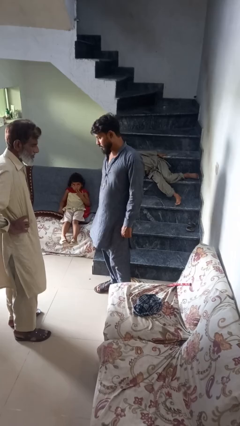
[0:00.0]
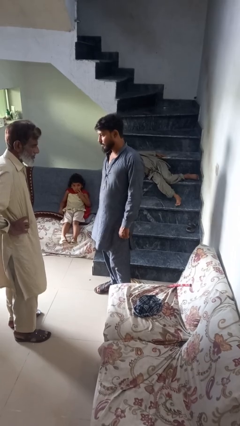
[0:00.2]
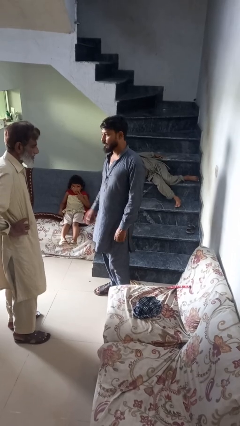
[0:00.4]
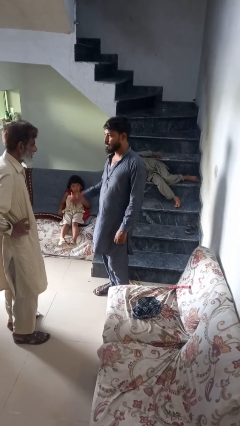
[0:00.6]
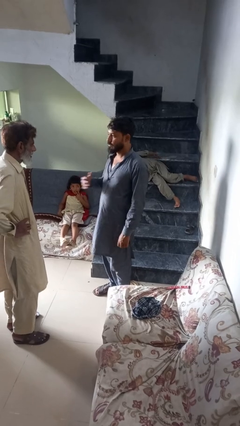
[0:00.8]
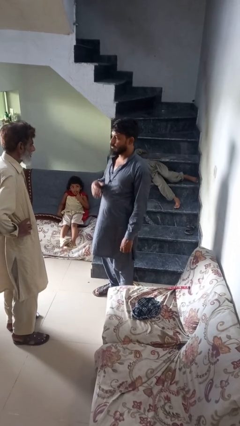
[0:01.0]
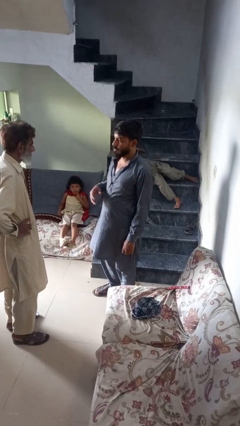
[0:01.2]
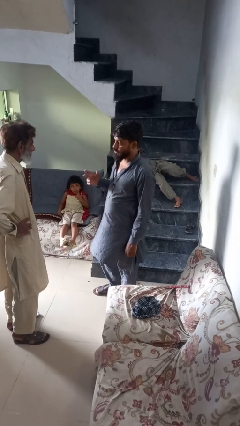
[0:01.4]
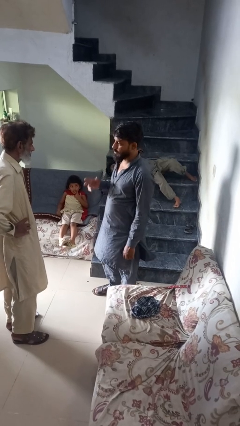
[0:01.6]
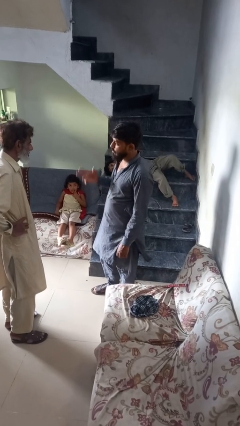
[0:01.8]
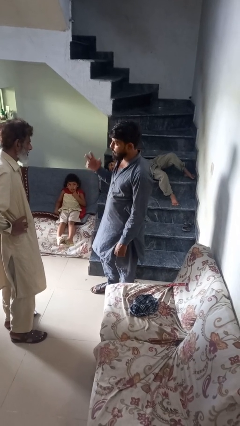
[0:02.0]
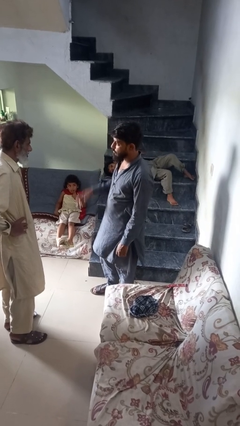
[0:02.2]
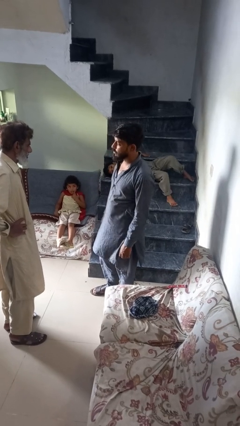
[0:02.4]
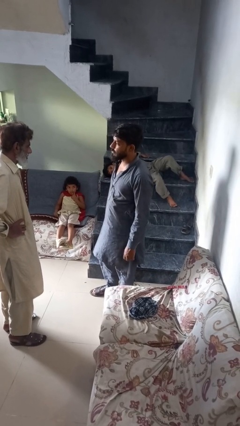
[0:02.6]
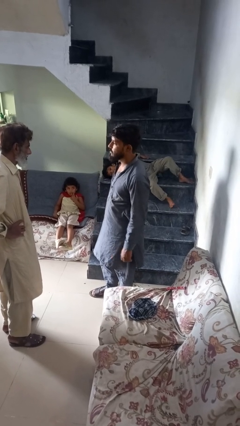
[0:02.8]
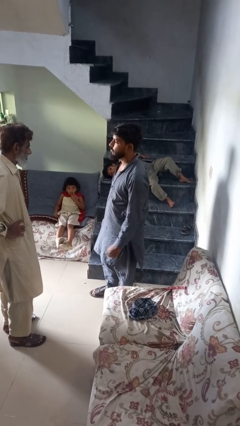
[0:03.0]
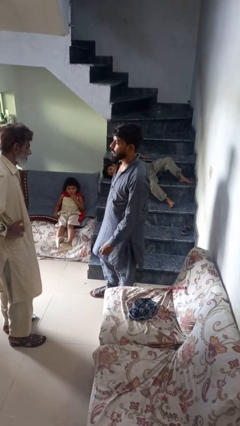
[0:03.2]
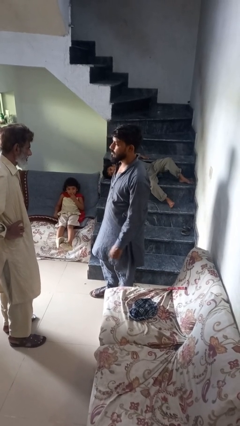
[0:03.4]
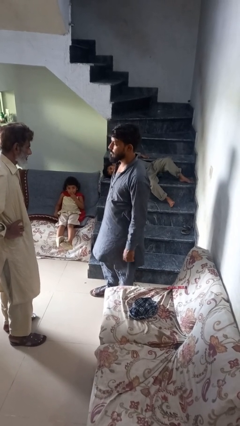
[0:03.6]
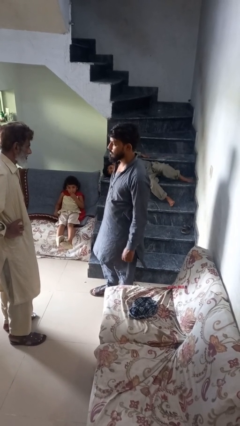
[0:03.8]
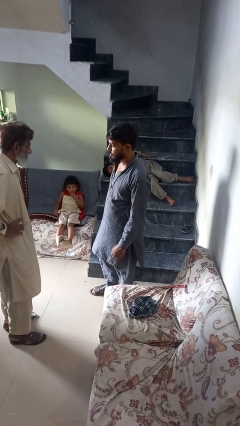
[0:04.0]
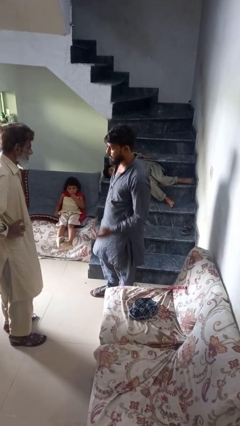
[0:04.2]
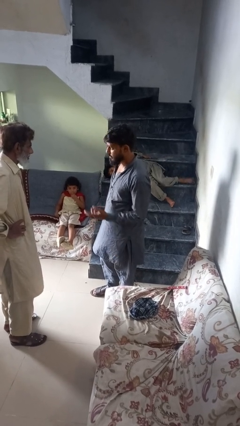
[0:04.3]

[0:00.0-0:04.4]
person talks to person

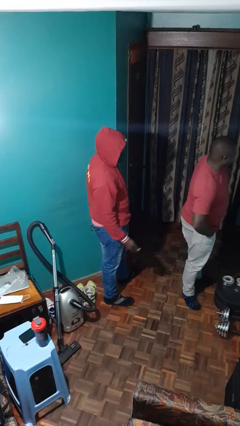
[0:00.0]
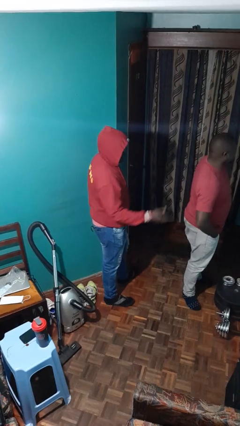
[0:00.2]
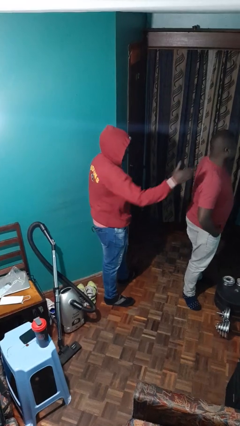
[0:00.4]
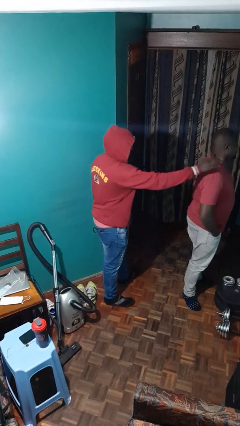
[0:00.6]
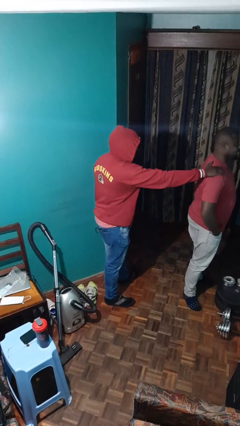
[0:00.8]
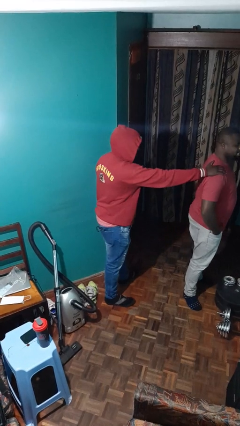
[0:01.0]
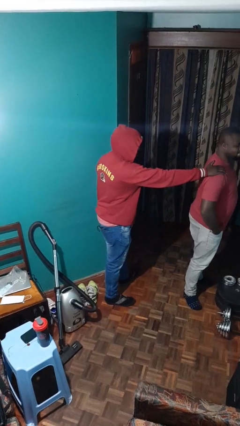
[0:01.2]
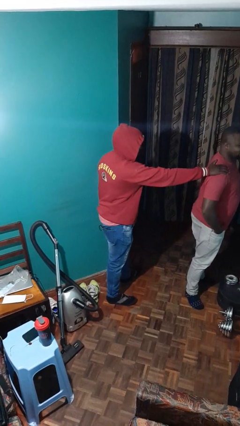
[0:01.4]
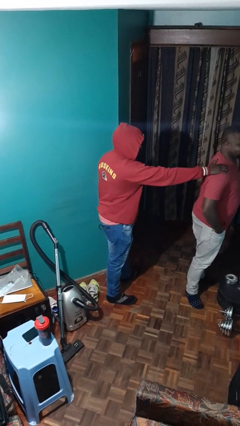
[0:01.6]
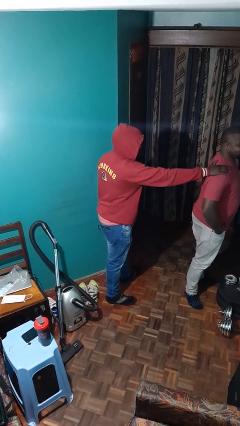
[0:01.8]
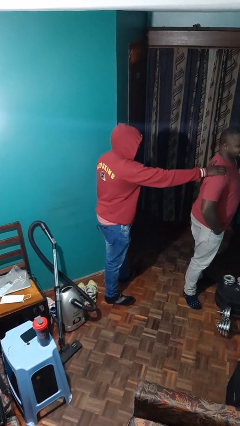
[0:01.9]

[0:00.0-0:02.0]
person grabs person by shoulder

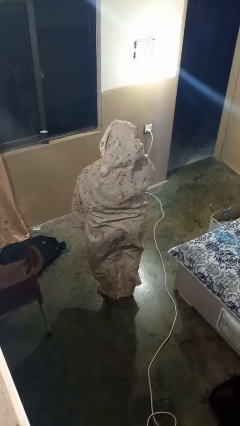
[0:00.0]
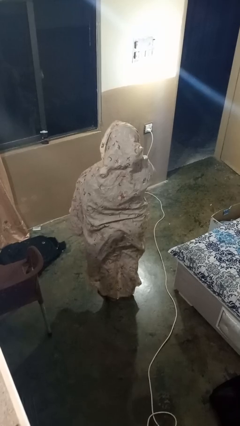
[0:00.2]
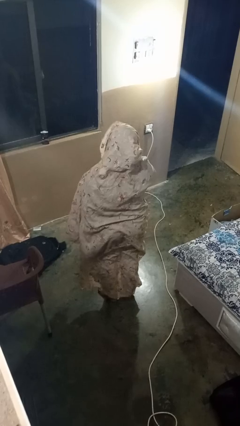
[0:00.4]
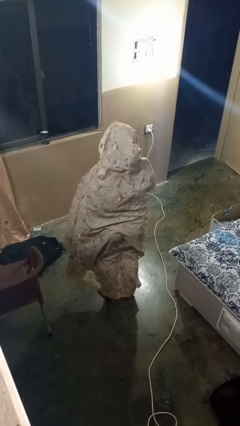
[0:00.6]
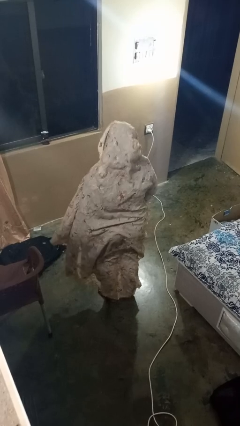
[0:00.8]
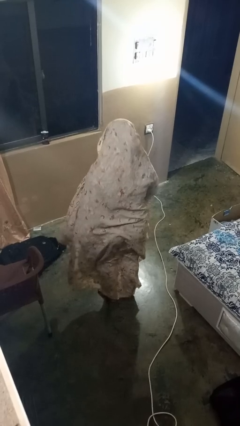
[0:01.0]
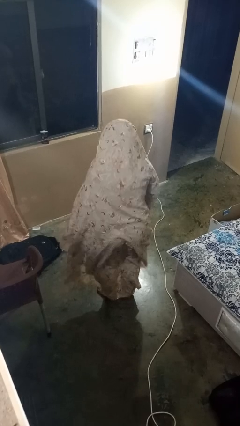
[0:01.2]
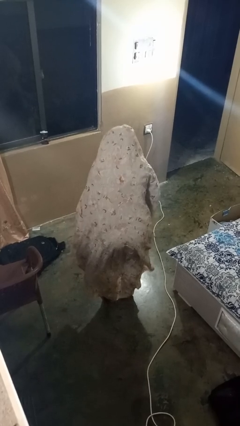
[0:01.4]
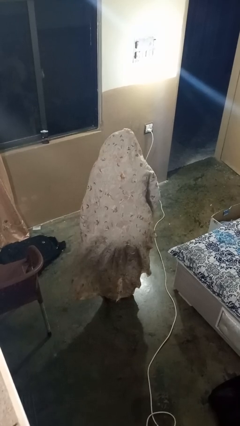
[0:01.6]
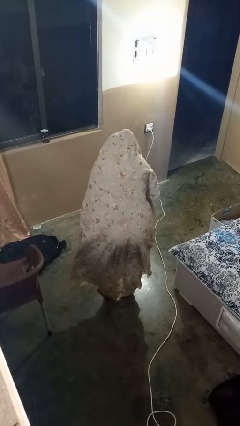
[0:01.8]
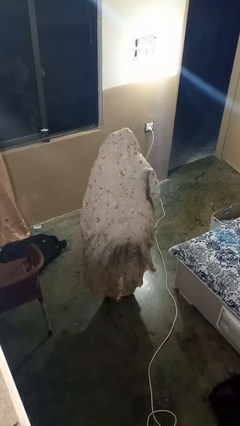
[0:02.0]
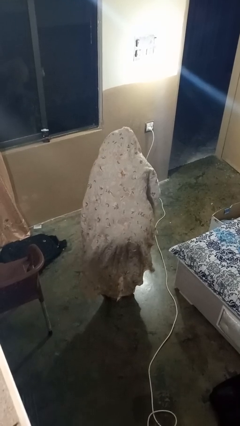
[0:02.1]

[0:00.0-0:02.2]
person bows

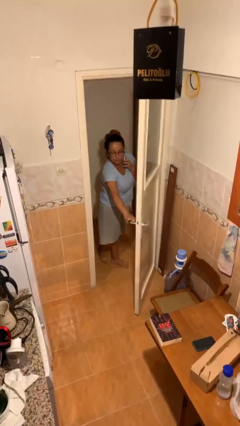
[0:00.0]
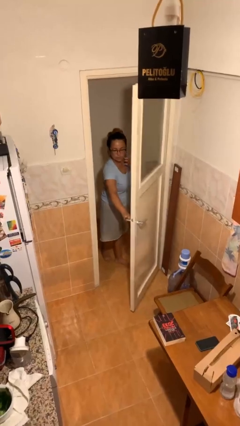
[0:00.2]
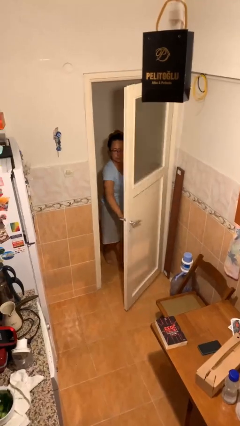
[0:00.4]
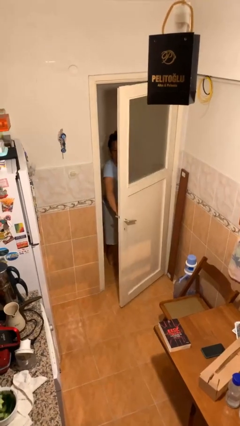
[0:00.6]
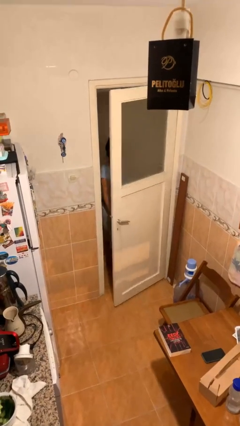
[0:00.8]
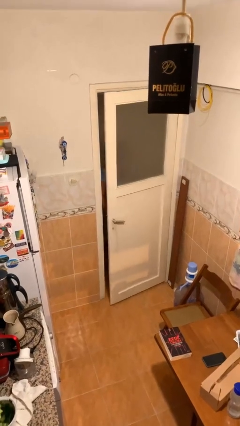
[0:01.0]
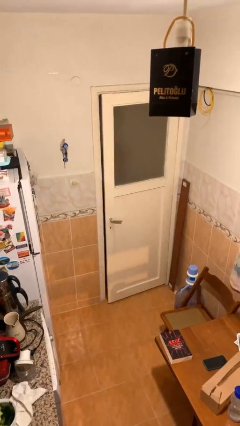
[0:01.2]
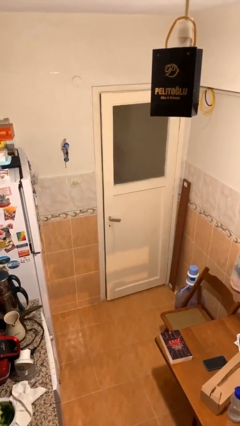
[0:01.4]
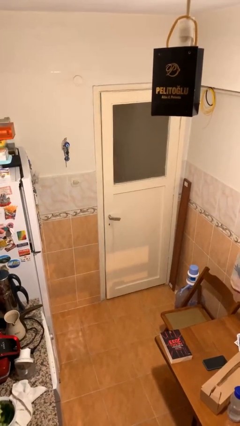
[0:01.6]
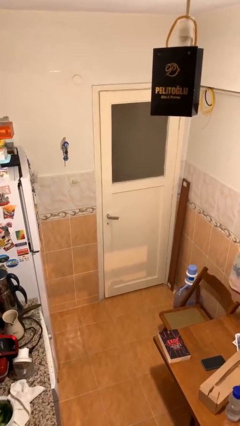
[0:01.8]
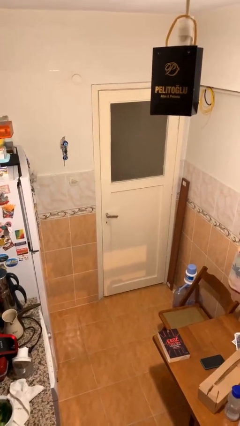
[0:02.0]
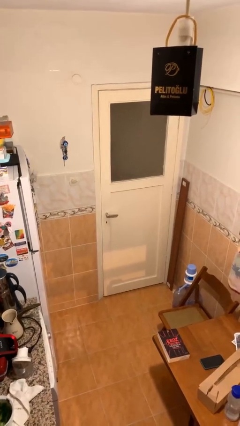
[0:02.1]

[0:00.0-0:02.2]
person closes facility door

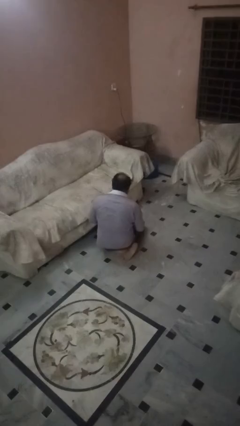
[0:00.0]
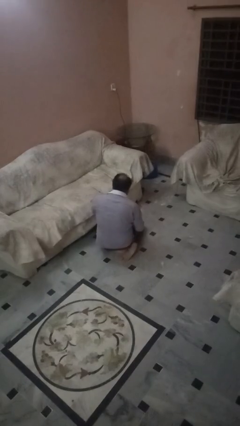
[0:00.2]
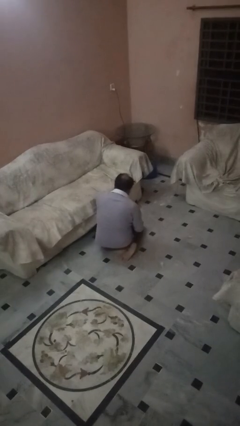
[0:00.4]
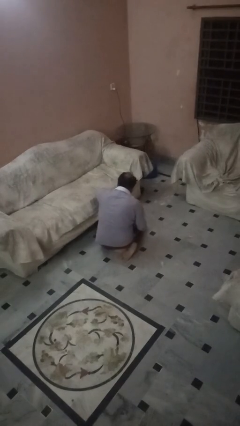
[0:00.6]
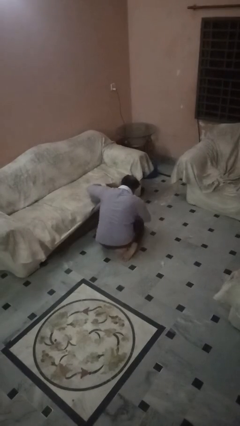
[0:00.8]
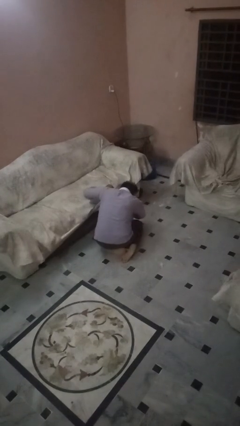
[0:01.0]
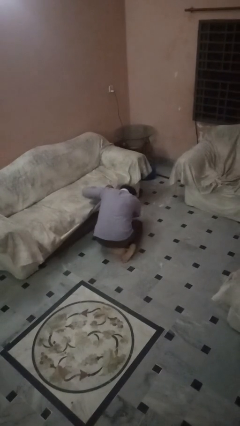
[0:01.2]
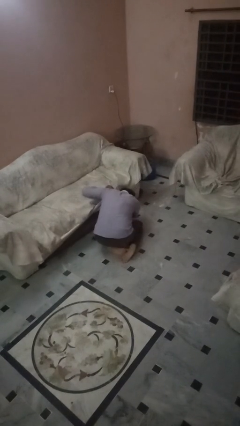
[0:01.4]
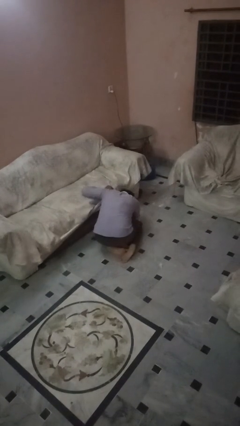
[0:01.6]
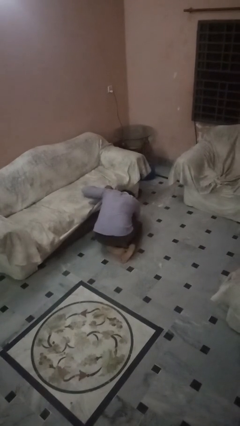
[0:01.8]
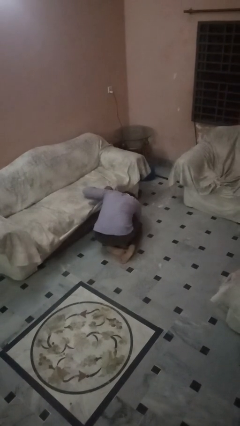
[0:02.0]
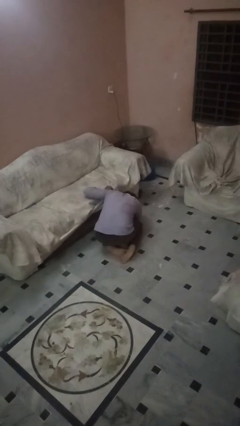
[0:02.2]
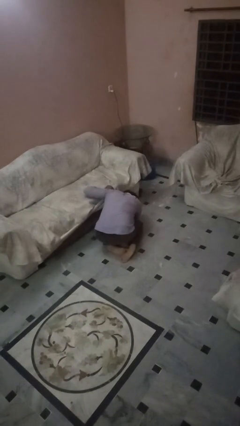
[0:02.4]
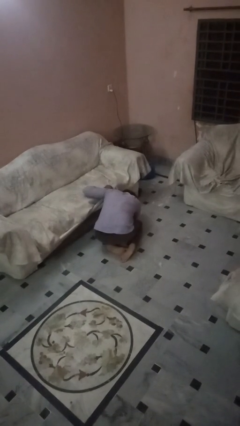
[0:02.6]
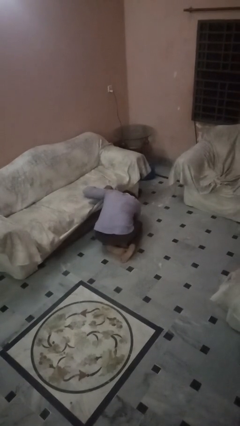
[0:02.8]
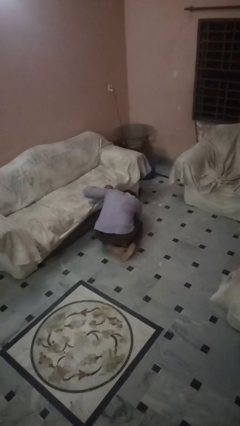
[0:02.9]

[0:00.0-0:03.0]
person searches under couch

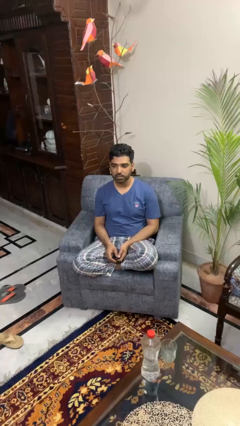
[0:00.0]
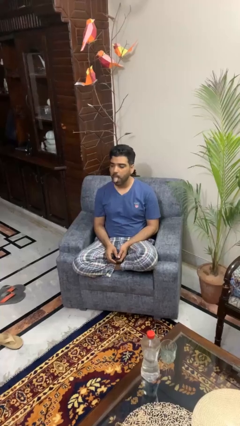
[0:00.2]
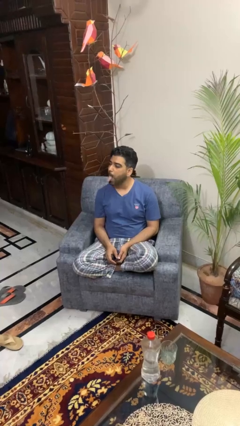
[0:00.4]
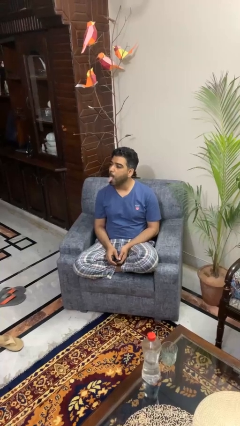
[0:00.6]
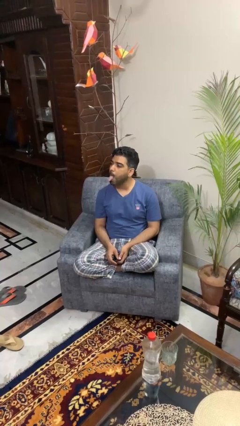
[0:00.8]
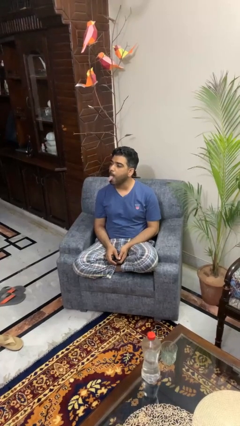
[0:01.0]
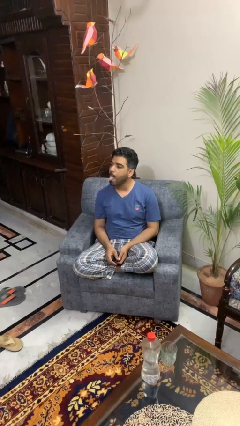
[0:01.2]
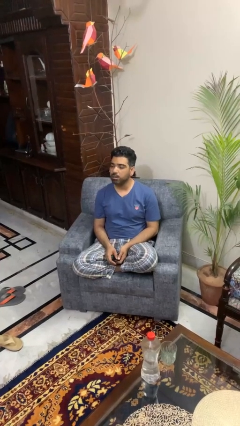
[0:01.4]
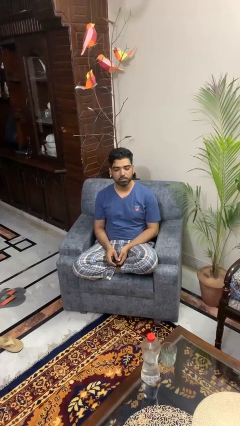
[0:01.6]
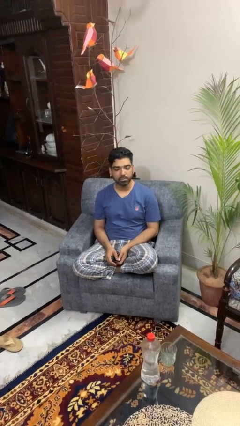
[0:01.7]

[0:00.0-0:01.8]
person sticks out tongue

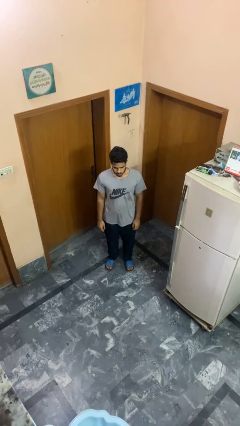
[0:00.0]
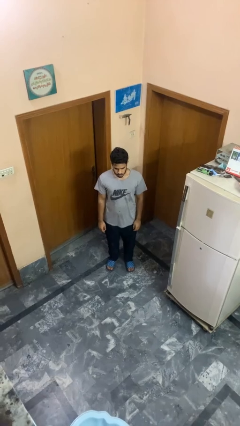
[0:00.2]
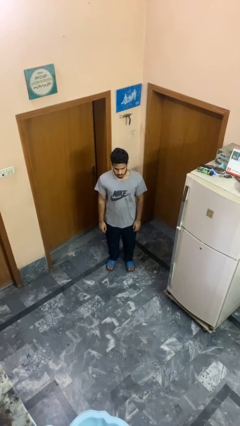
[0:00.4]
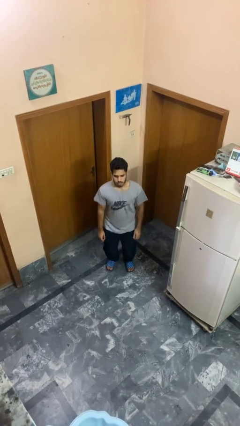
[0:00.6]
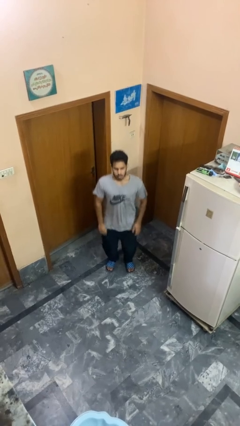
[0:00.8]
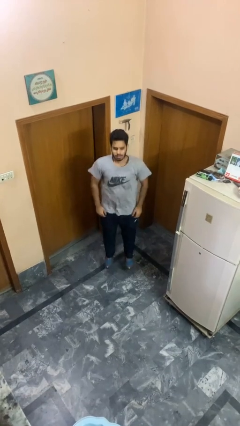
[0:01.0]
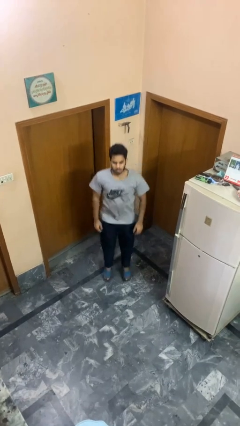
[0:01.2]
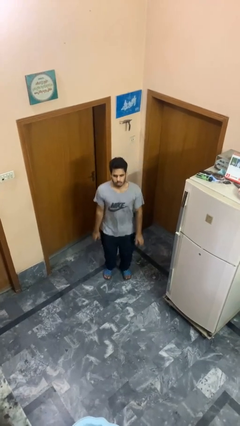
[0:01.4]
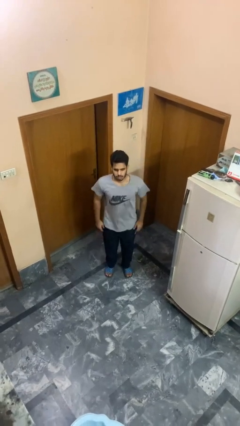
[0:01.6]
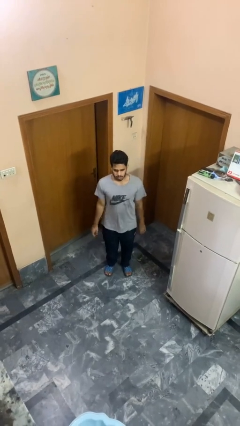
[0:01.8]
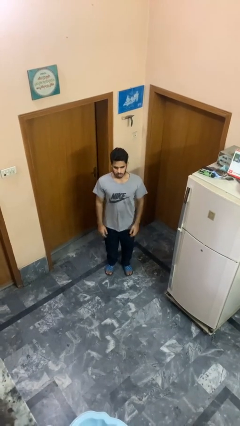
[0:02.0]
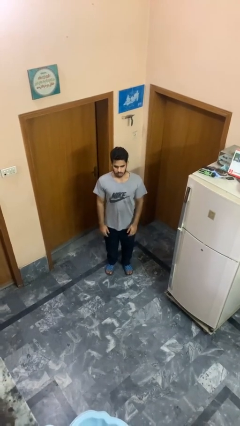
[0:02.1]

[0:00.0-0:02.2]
person jumps
